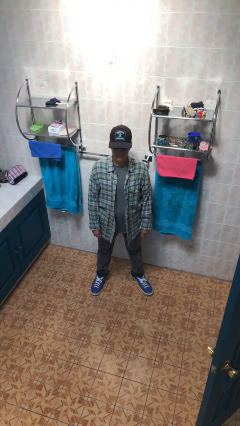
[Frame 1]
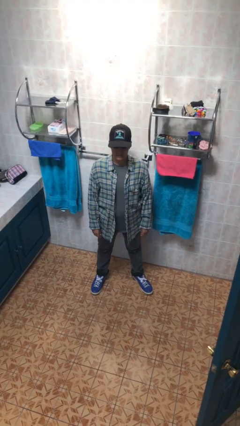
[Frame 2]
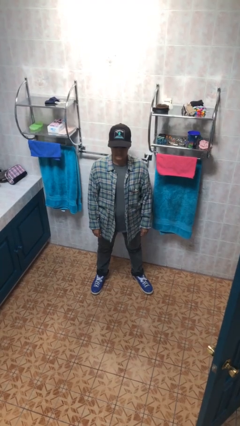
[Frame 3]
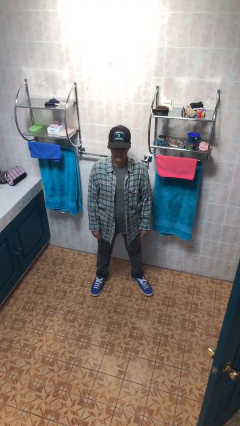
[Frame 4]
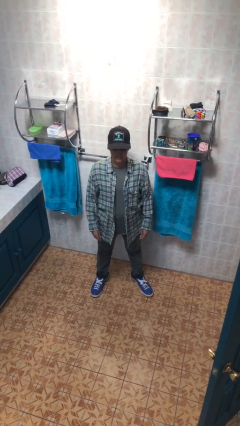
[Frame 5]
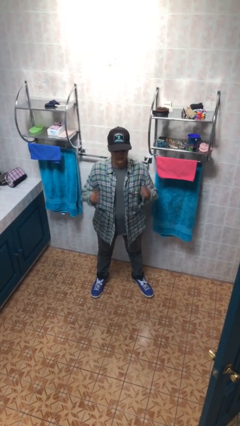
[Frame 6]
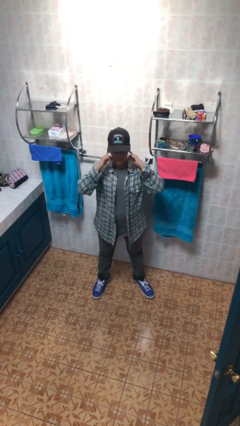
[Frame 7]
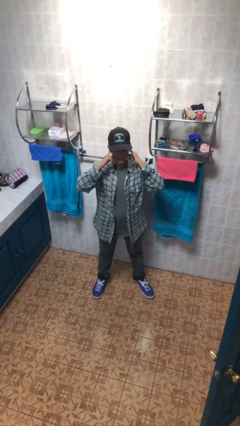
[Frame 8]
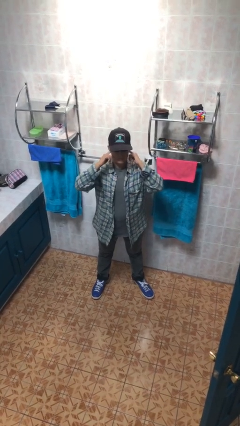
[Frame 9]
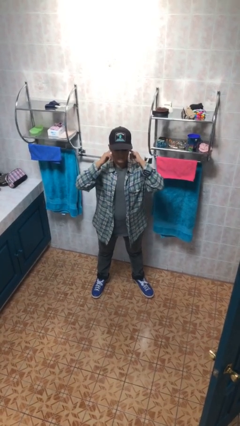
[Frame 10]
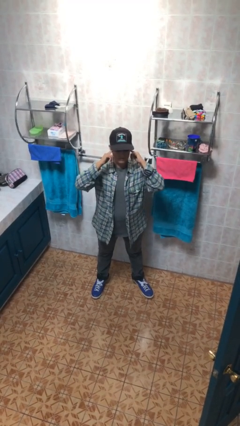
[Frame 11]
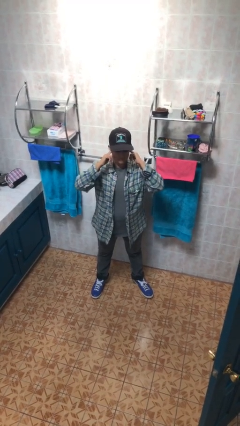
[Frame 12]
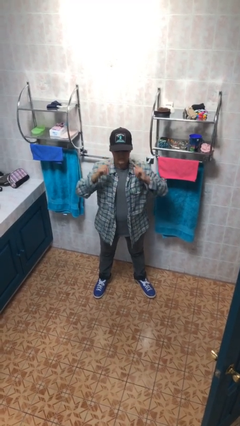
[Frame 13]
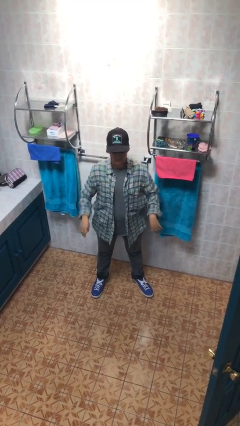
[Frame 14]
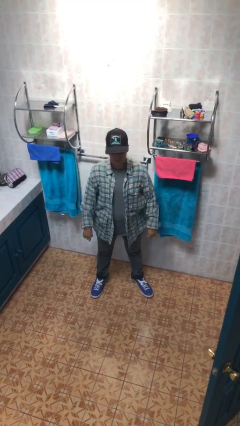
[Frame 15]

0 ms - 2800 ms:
person puts fingers in ear

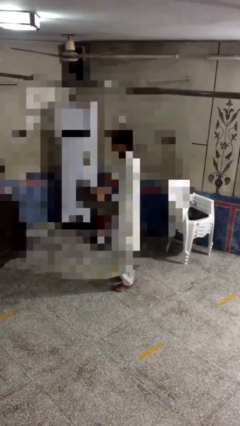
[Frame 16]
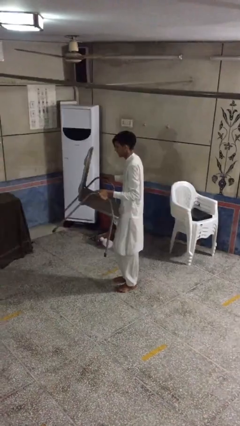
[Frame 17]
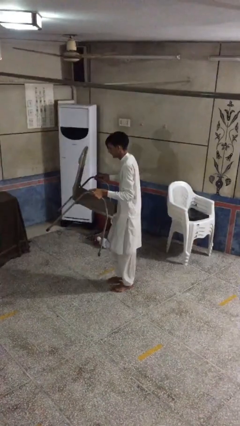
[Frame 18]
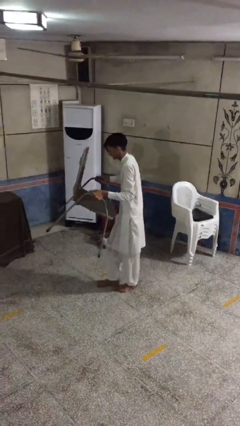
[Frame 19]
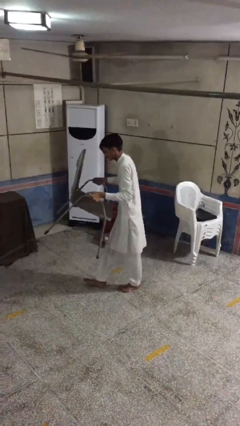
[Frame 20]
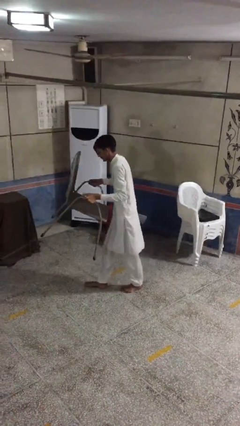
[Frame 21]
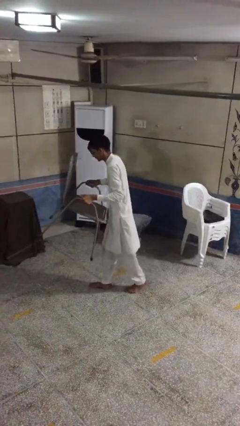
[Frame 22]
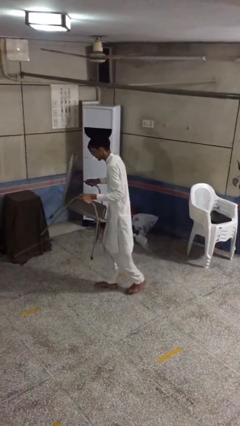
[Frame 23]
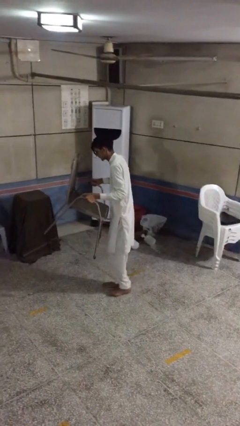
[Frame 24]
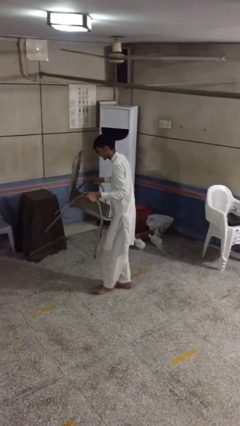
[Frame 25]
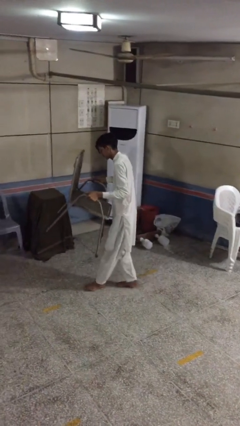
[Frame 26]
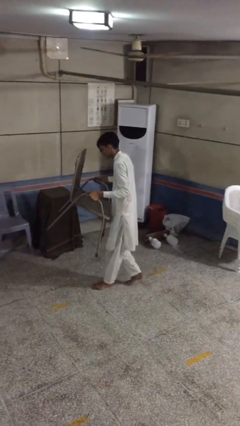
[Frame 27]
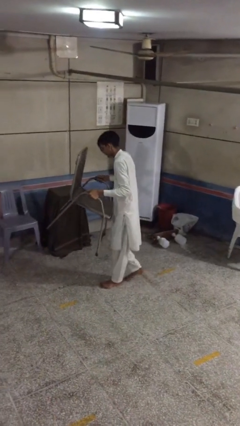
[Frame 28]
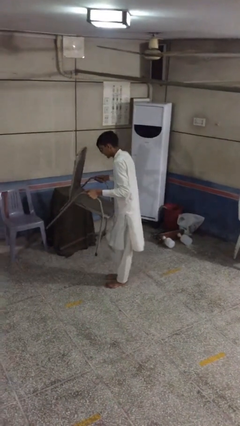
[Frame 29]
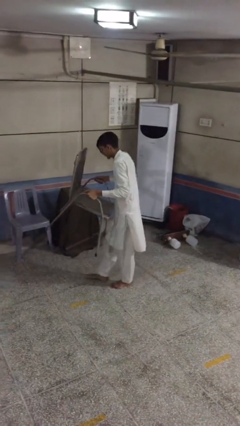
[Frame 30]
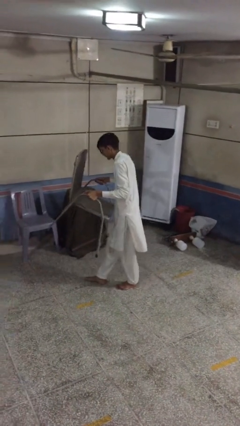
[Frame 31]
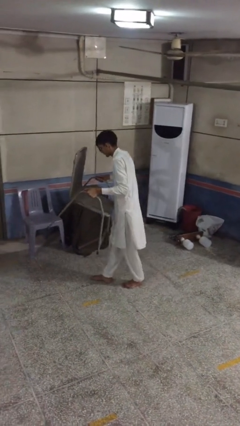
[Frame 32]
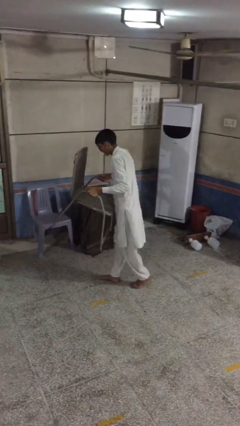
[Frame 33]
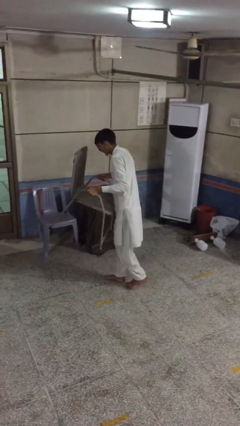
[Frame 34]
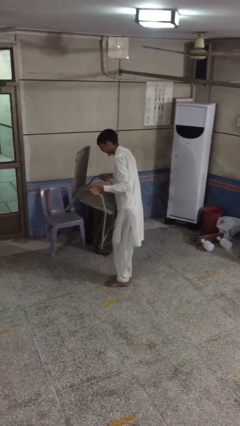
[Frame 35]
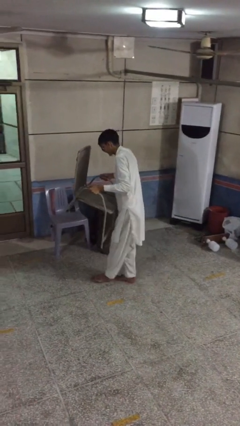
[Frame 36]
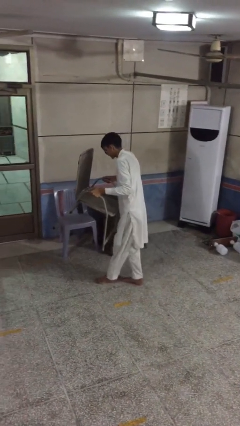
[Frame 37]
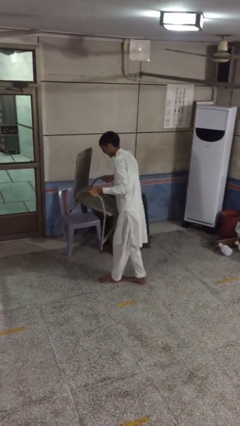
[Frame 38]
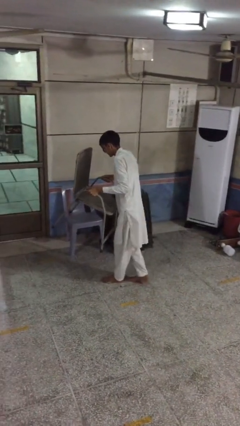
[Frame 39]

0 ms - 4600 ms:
person carries heavy object

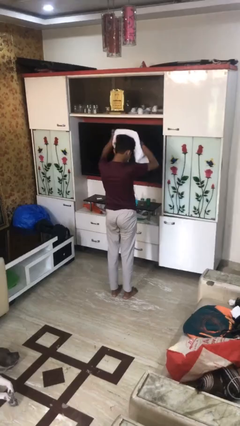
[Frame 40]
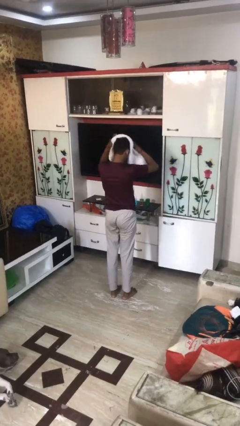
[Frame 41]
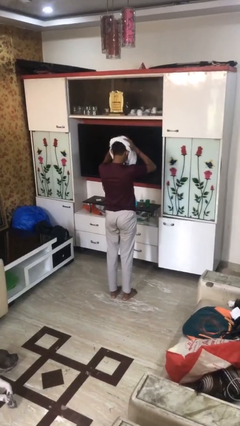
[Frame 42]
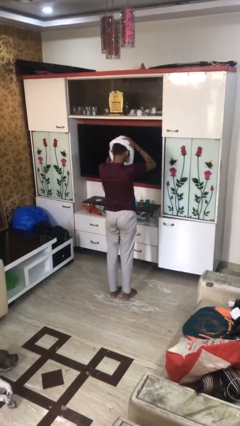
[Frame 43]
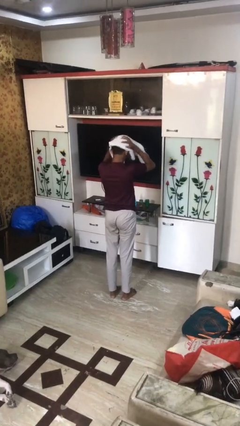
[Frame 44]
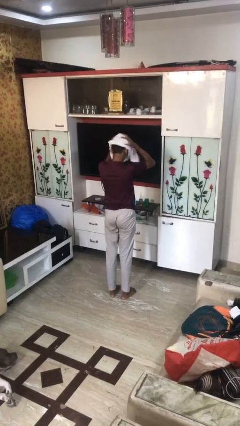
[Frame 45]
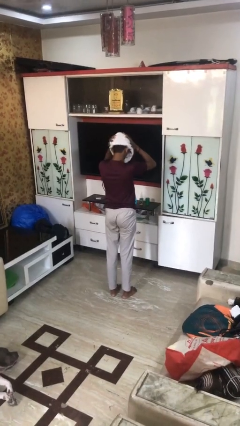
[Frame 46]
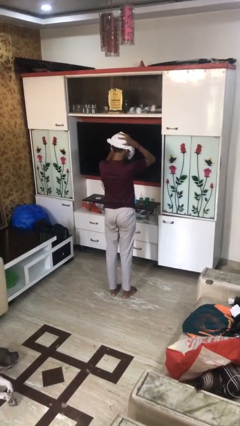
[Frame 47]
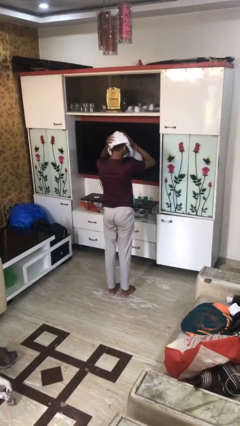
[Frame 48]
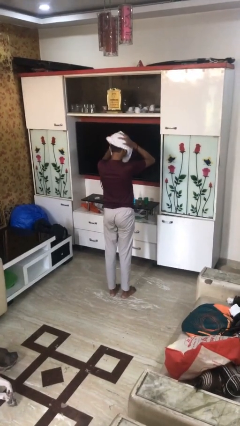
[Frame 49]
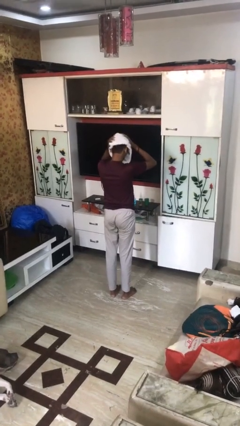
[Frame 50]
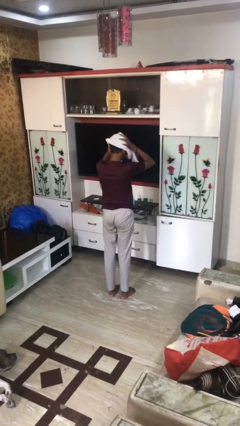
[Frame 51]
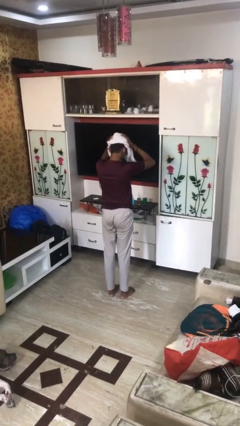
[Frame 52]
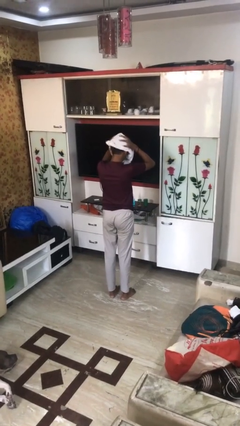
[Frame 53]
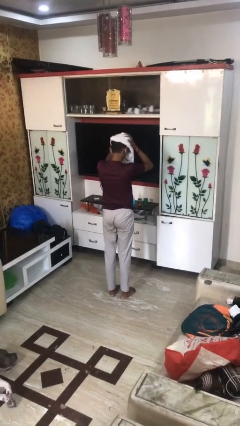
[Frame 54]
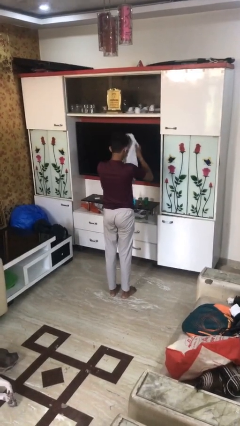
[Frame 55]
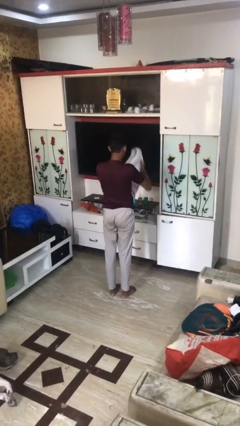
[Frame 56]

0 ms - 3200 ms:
person dries hair with towel

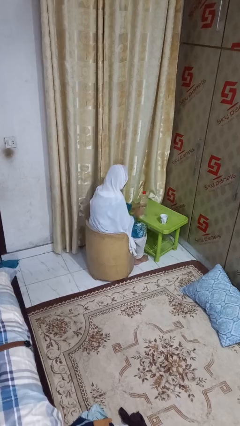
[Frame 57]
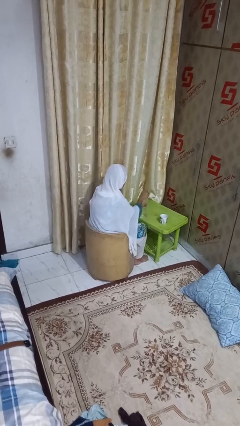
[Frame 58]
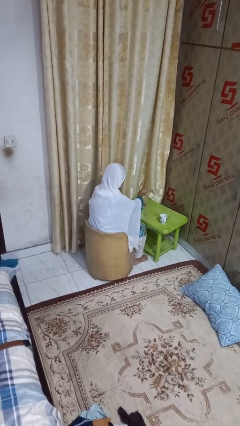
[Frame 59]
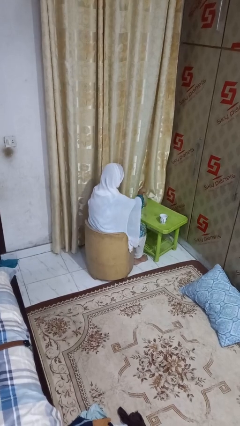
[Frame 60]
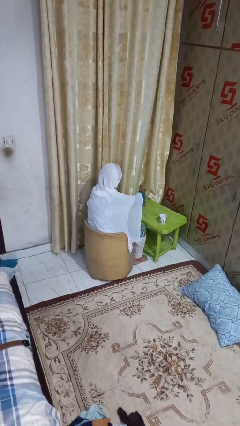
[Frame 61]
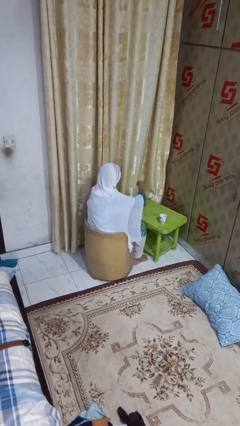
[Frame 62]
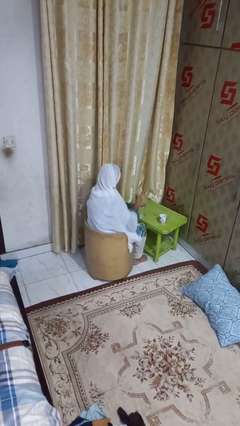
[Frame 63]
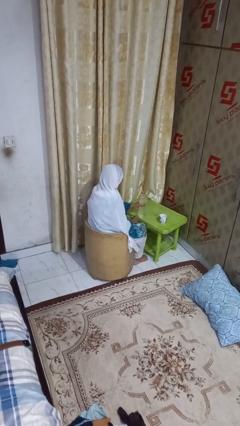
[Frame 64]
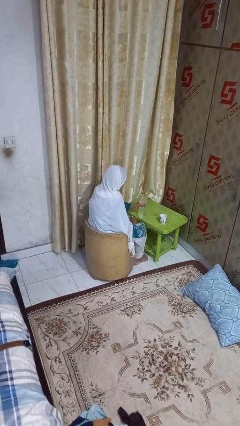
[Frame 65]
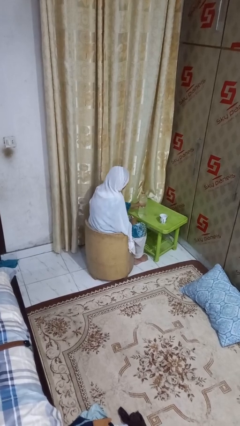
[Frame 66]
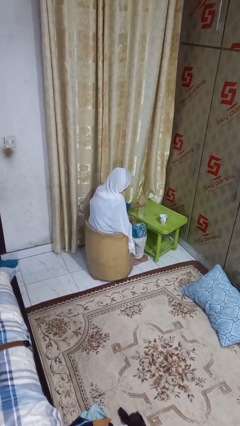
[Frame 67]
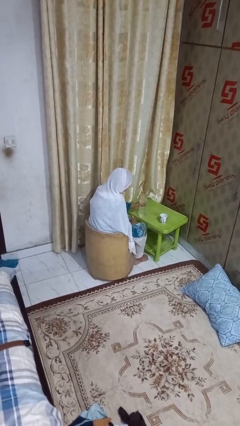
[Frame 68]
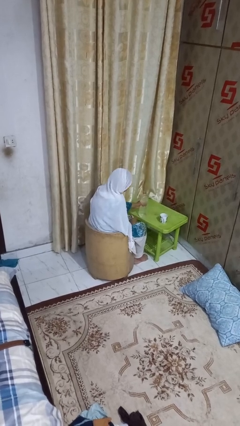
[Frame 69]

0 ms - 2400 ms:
person unscrews lid from bottle

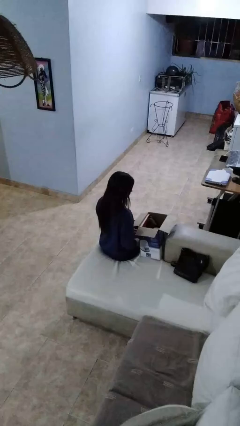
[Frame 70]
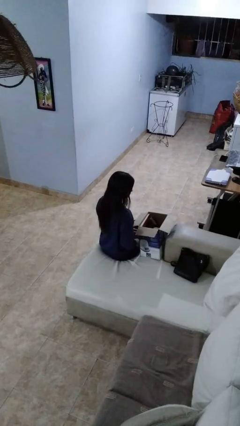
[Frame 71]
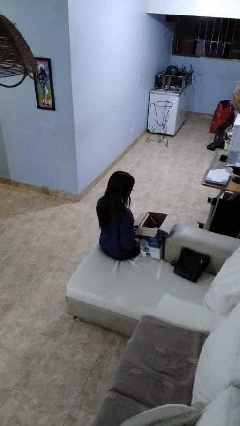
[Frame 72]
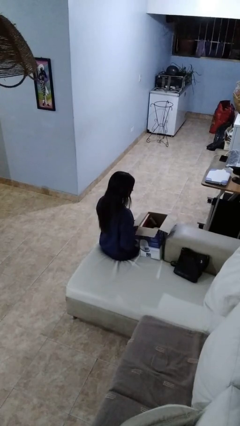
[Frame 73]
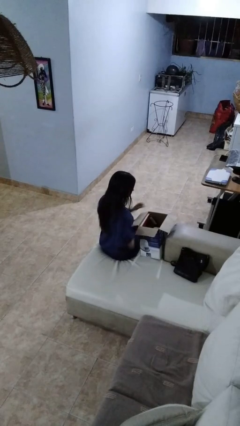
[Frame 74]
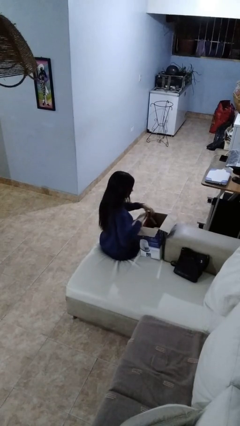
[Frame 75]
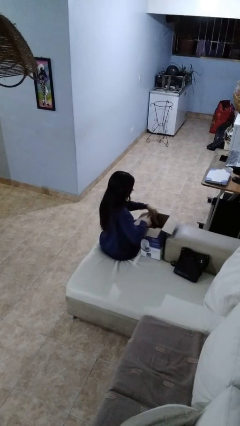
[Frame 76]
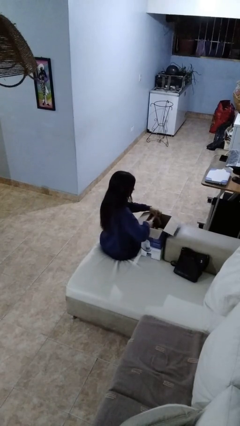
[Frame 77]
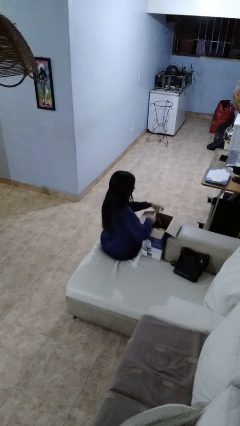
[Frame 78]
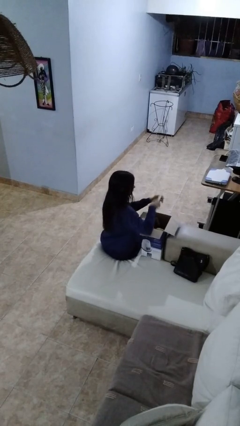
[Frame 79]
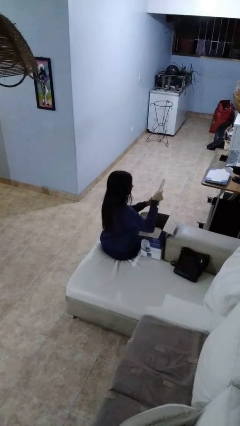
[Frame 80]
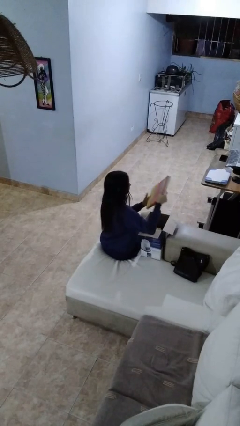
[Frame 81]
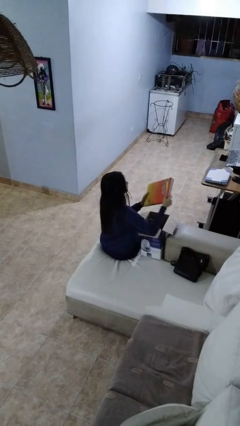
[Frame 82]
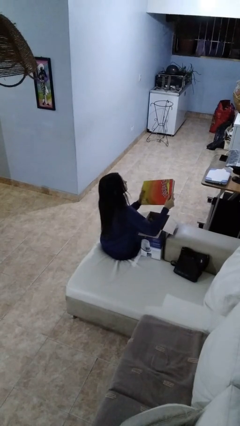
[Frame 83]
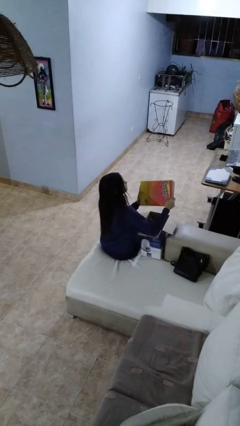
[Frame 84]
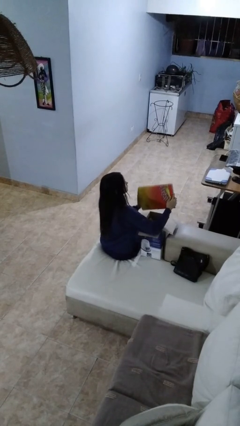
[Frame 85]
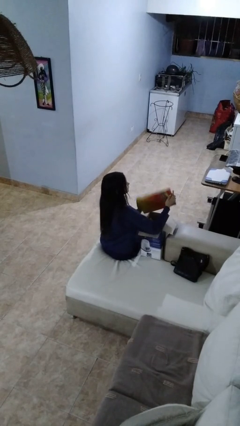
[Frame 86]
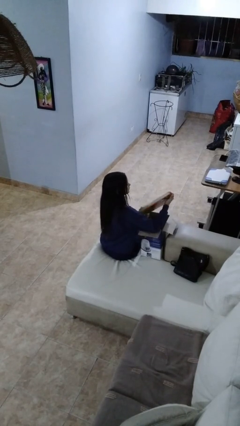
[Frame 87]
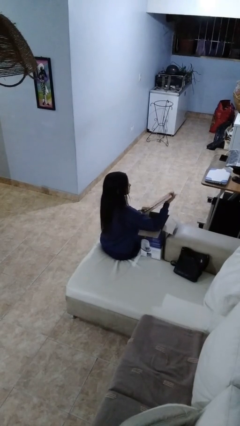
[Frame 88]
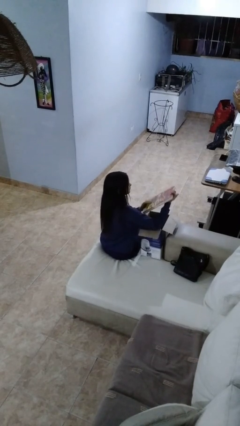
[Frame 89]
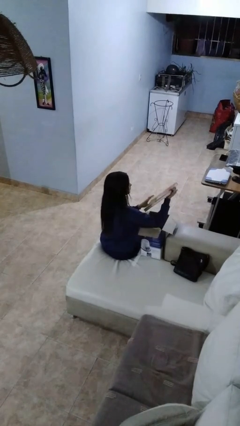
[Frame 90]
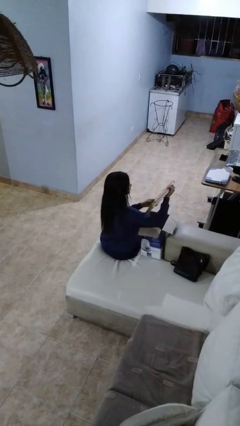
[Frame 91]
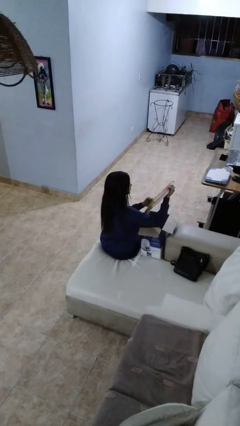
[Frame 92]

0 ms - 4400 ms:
person takes object from box
